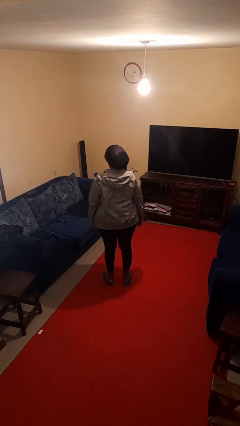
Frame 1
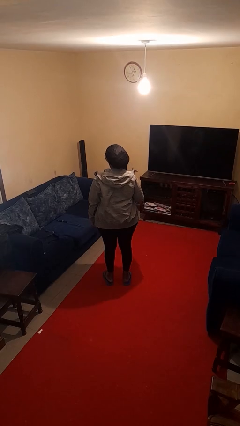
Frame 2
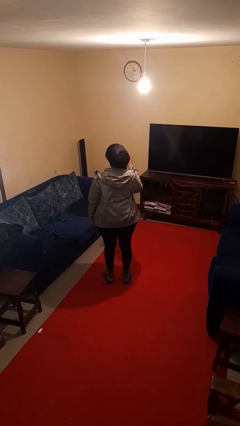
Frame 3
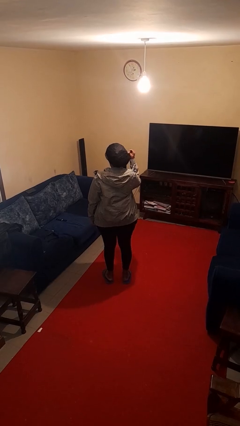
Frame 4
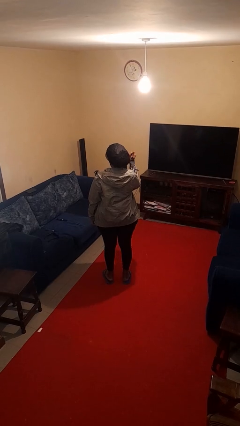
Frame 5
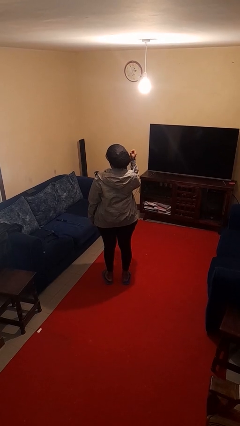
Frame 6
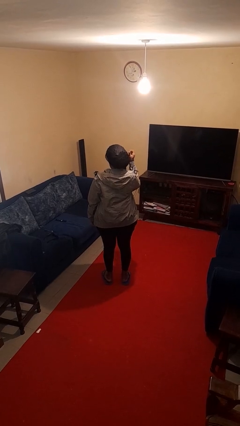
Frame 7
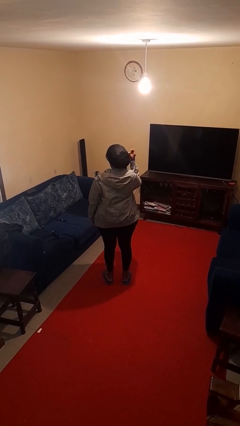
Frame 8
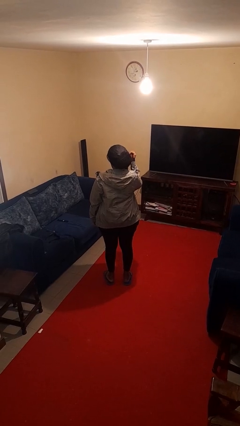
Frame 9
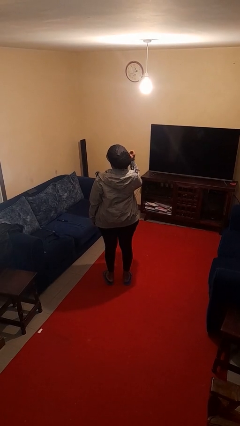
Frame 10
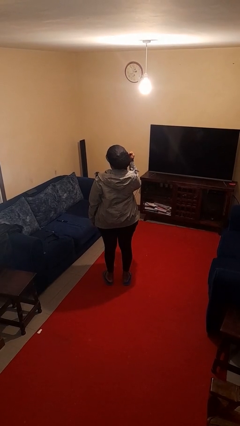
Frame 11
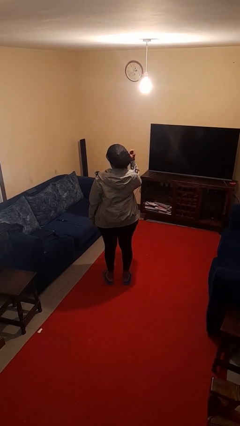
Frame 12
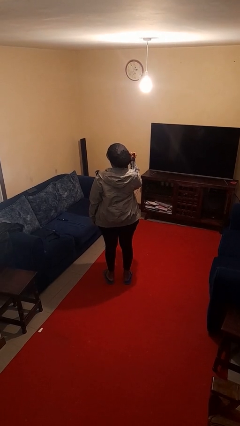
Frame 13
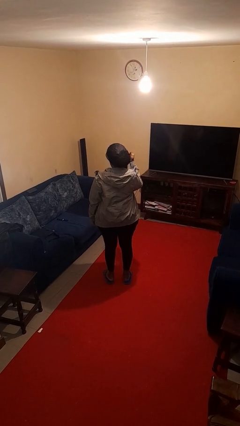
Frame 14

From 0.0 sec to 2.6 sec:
person snaps fingers

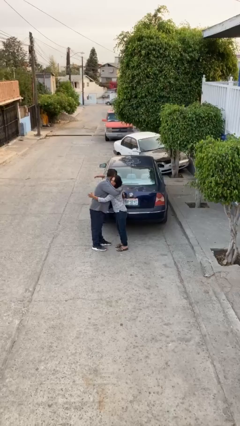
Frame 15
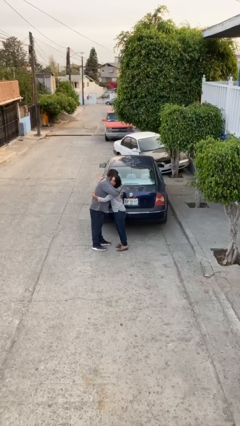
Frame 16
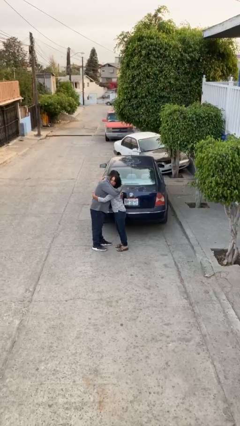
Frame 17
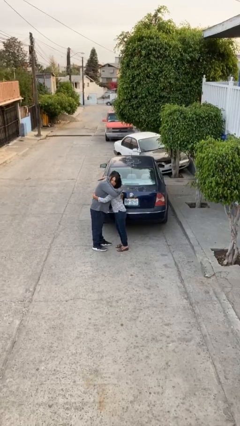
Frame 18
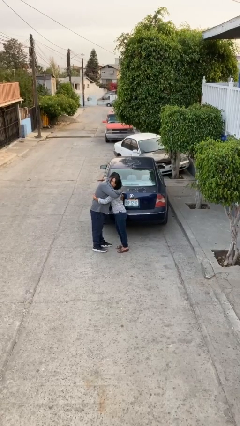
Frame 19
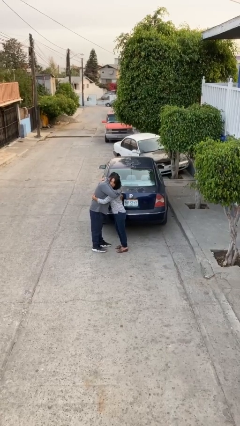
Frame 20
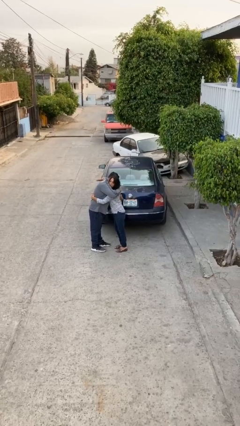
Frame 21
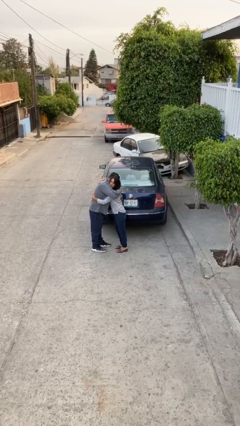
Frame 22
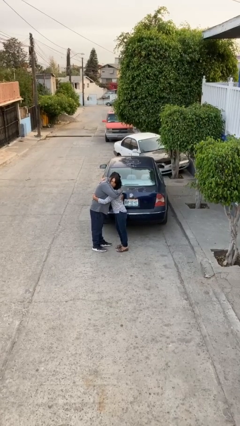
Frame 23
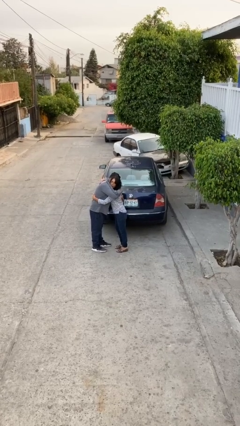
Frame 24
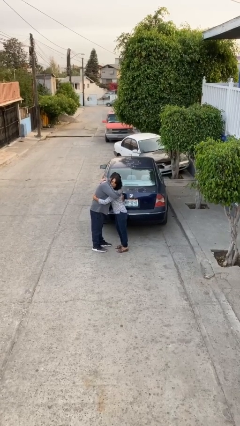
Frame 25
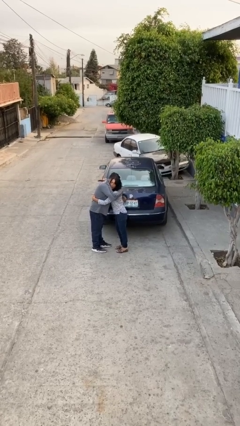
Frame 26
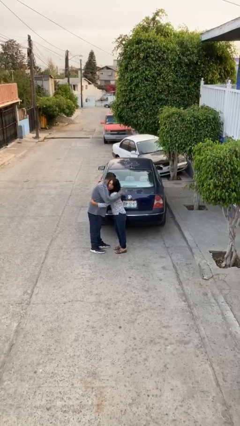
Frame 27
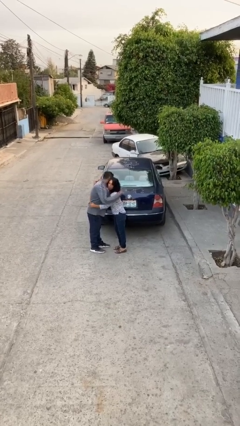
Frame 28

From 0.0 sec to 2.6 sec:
person embraces person

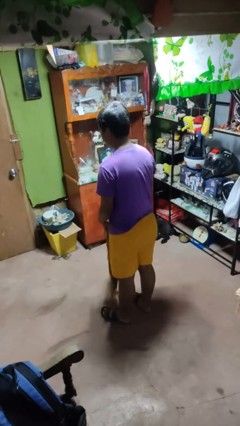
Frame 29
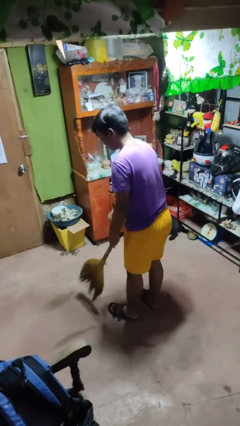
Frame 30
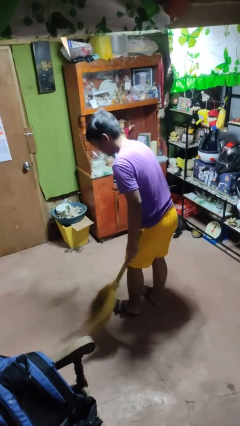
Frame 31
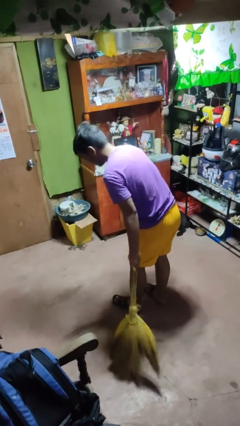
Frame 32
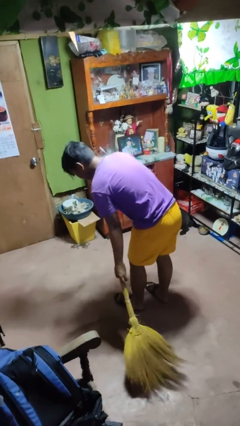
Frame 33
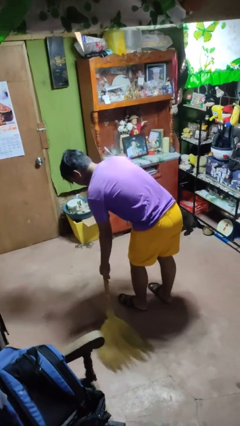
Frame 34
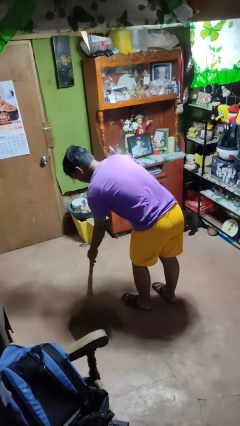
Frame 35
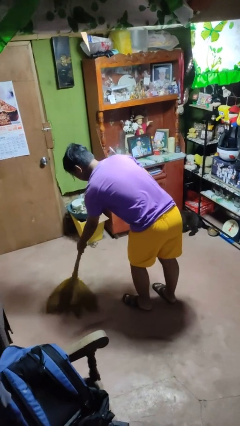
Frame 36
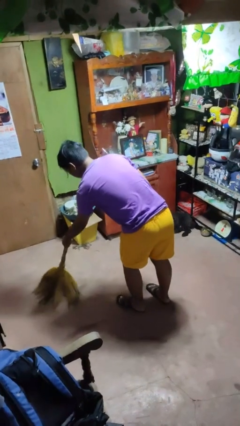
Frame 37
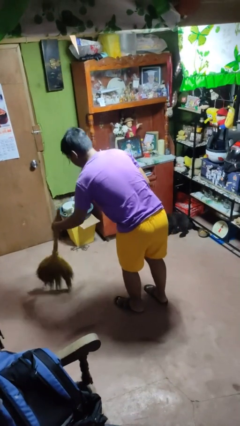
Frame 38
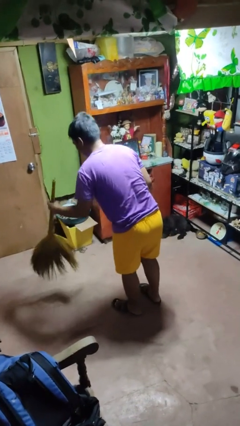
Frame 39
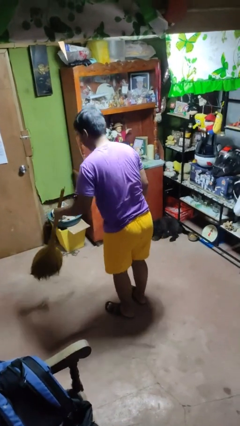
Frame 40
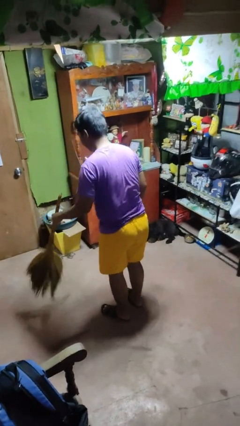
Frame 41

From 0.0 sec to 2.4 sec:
person sweeps floor

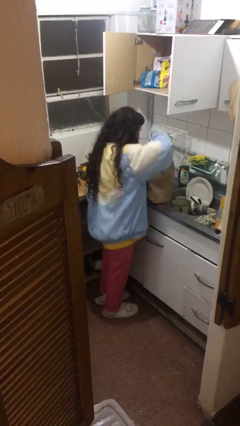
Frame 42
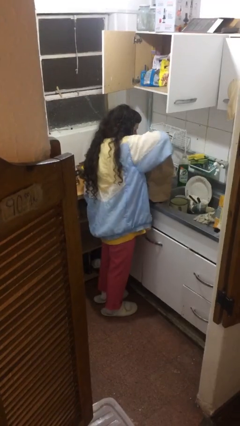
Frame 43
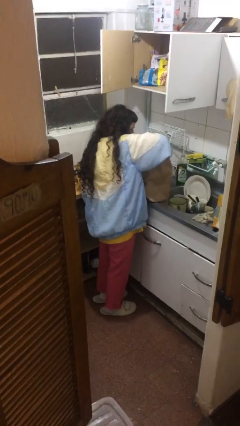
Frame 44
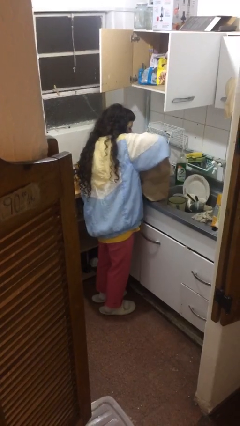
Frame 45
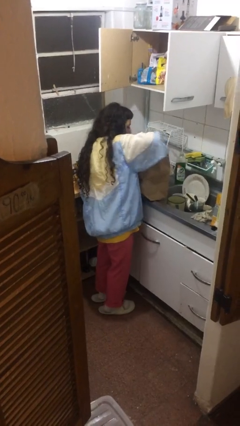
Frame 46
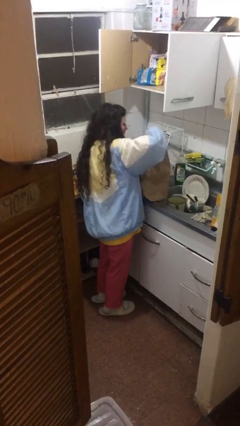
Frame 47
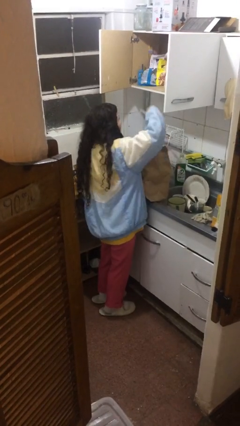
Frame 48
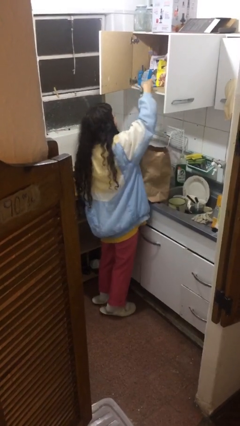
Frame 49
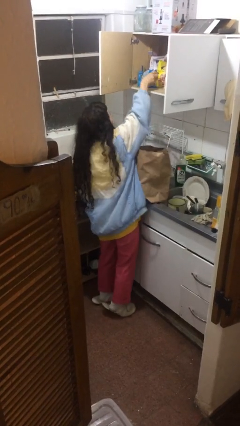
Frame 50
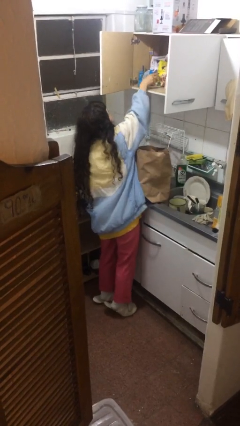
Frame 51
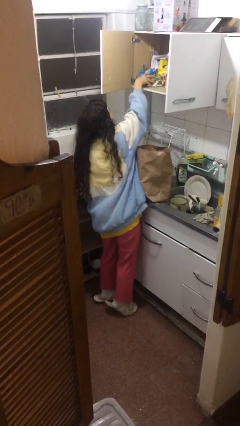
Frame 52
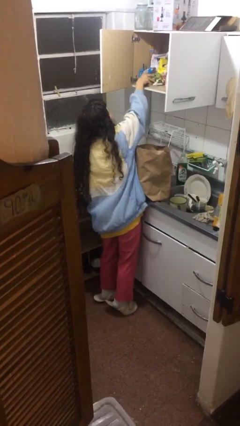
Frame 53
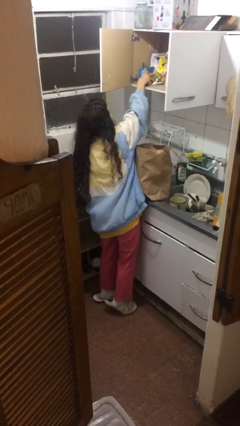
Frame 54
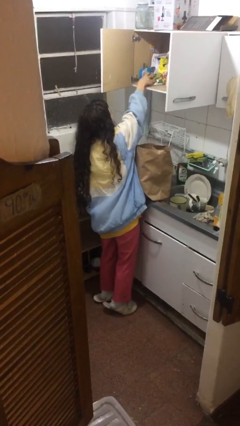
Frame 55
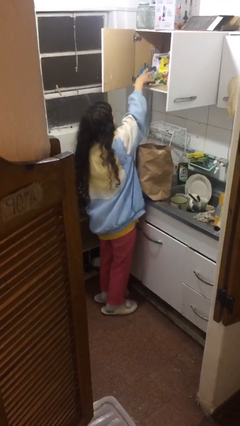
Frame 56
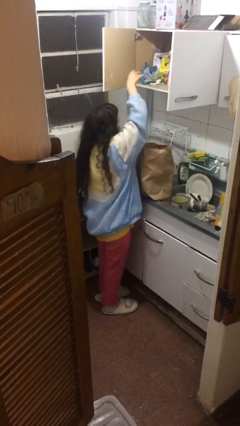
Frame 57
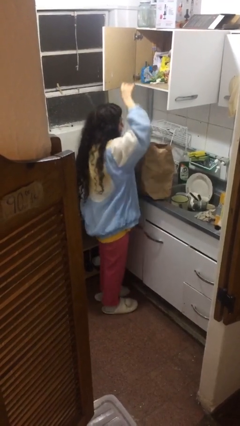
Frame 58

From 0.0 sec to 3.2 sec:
person loads groceries into cabinet

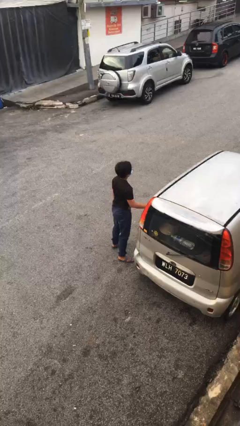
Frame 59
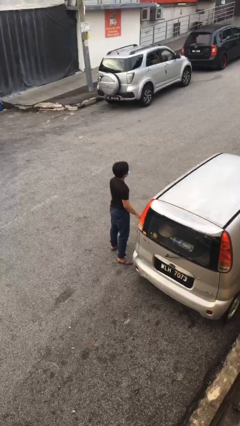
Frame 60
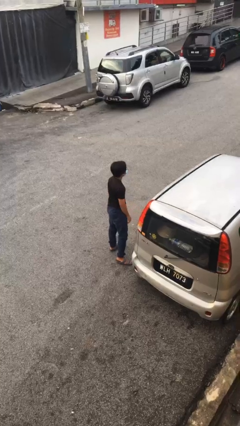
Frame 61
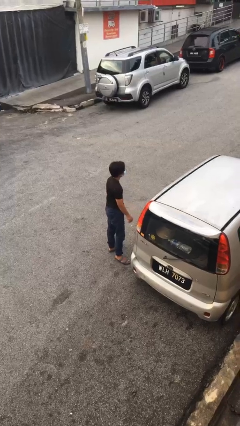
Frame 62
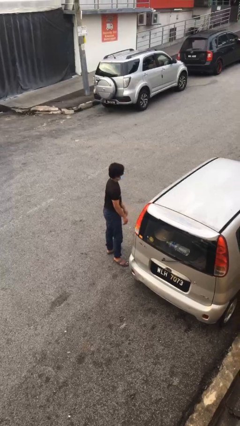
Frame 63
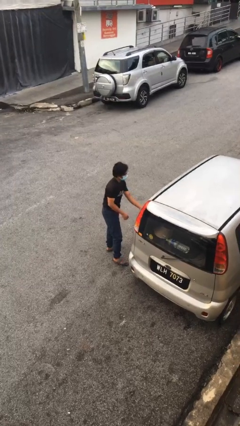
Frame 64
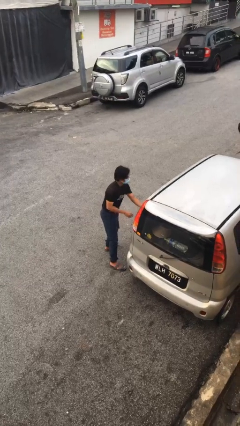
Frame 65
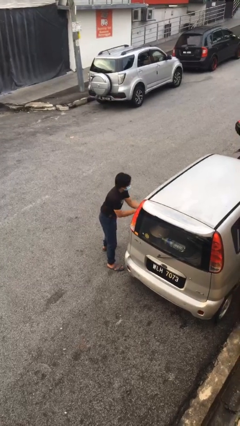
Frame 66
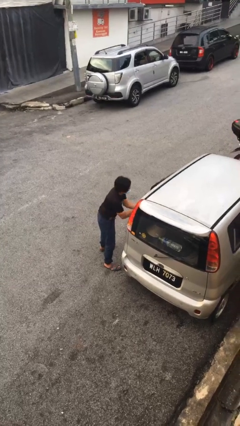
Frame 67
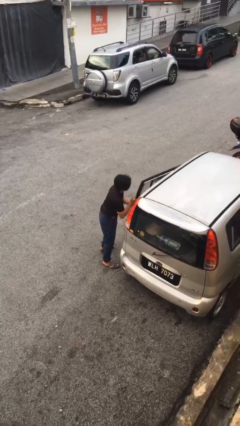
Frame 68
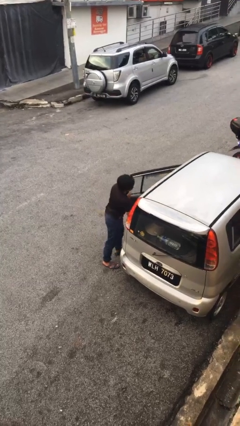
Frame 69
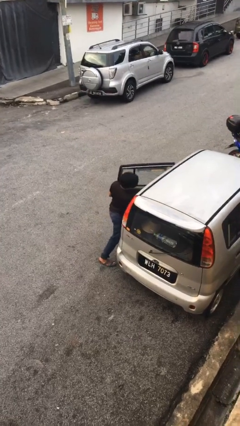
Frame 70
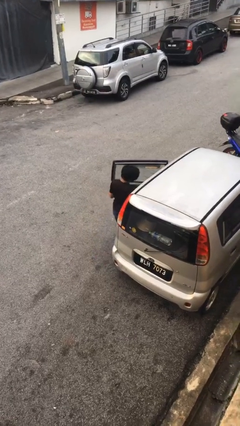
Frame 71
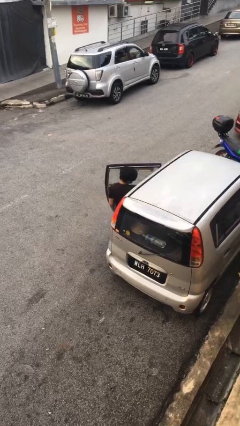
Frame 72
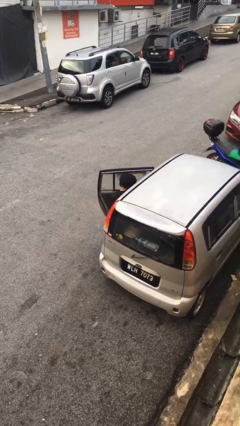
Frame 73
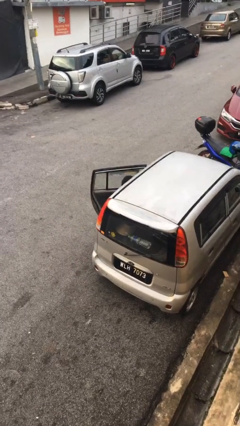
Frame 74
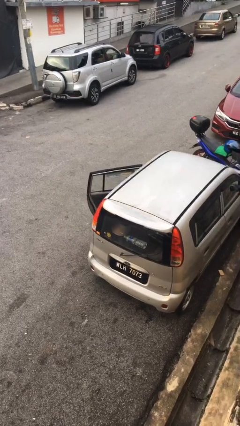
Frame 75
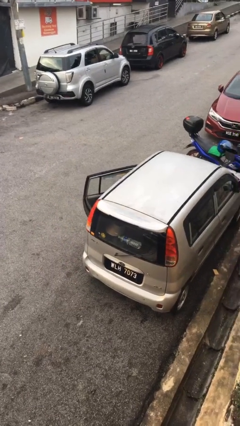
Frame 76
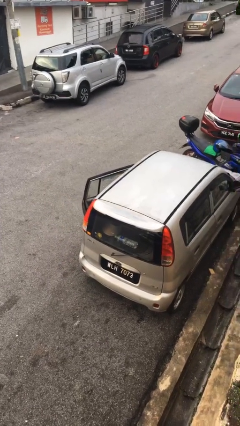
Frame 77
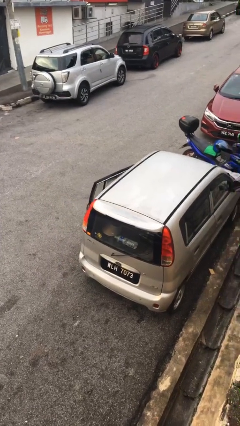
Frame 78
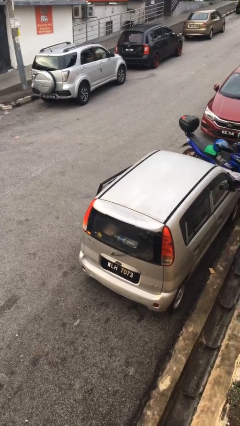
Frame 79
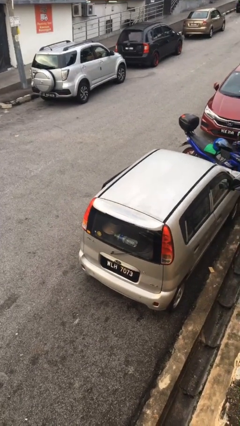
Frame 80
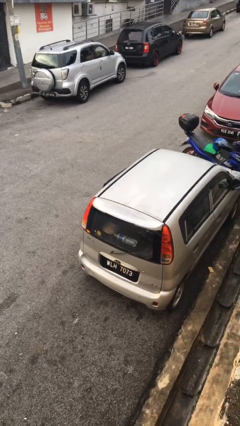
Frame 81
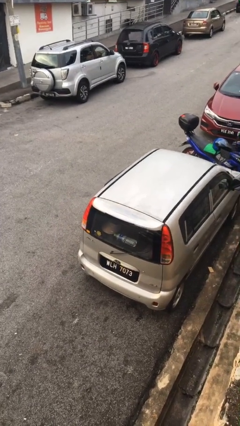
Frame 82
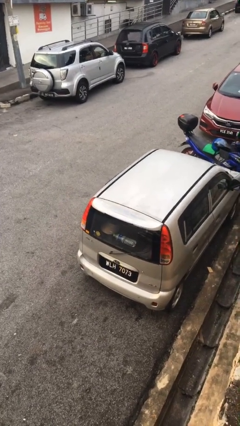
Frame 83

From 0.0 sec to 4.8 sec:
person enters car

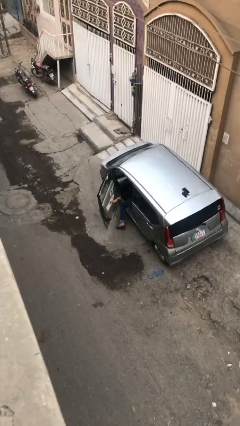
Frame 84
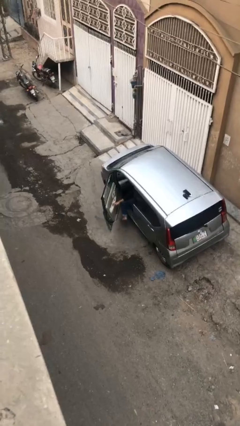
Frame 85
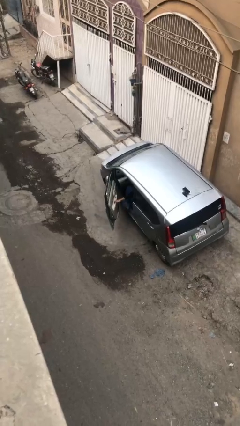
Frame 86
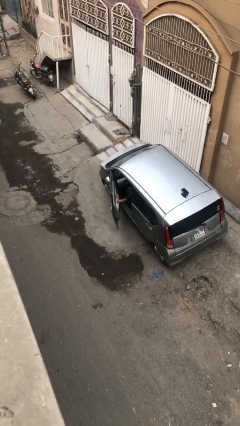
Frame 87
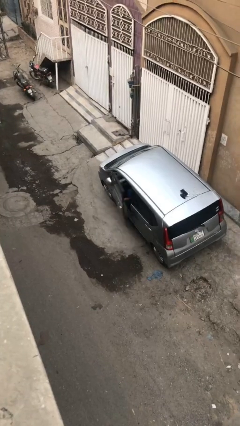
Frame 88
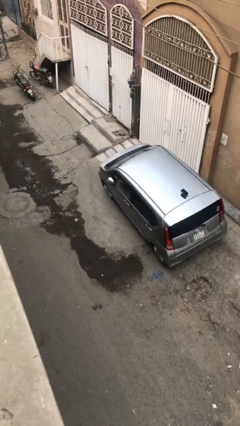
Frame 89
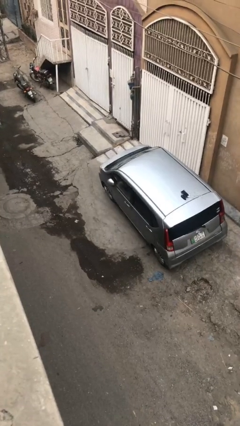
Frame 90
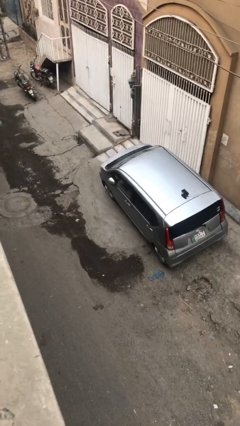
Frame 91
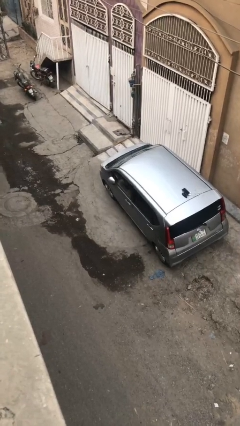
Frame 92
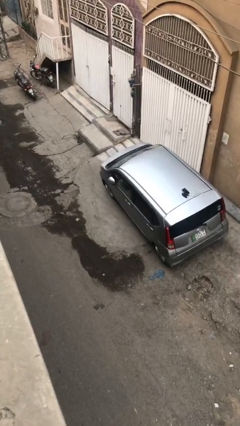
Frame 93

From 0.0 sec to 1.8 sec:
person closes car door

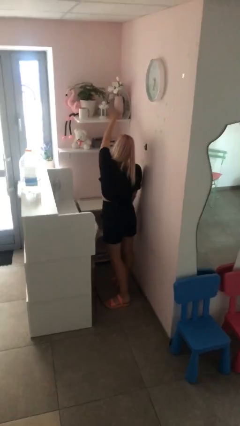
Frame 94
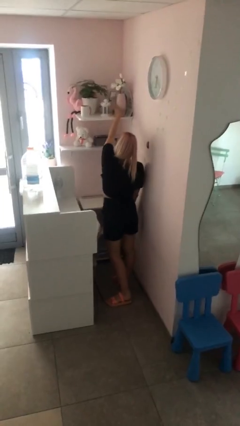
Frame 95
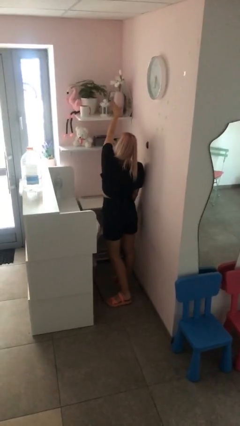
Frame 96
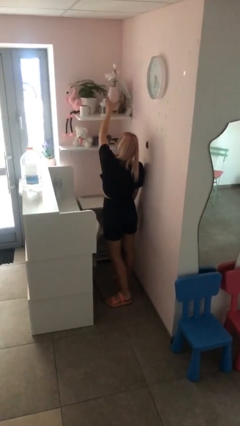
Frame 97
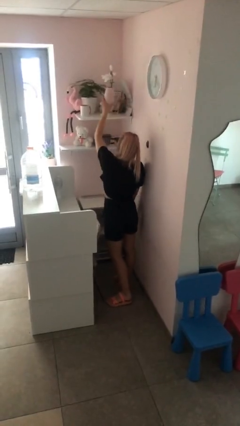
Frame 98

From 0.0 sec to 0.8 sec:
person picks up object from cabinet
